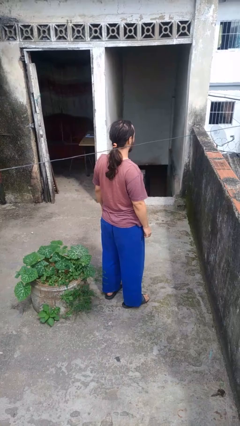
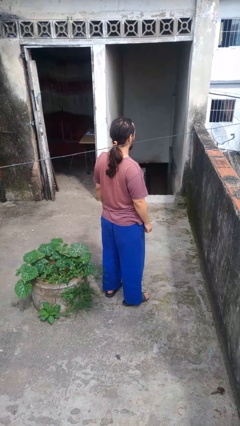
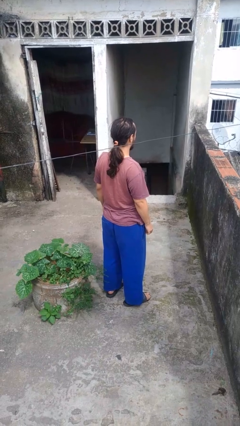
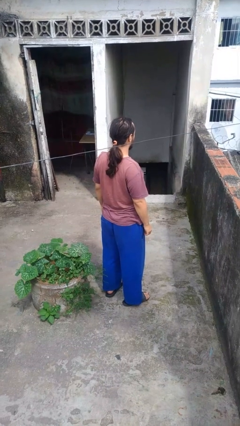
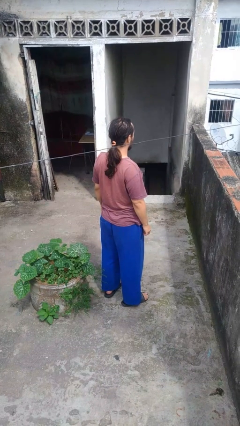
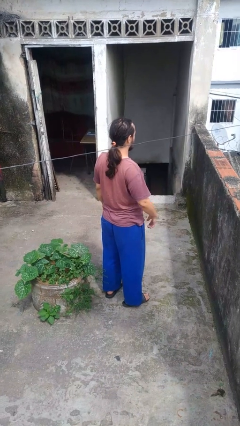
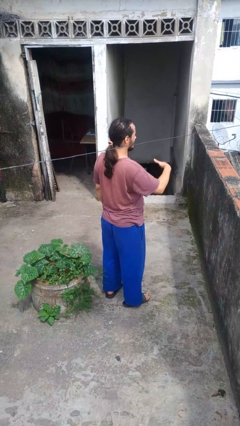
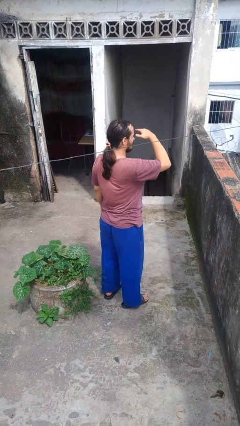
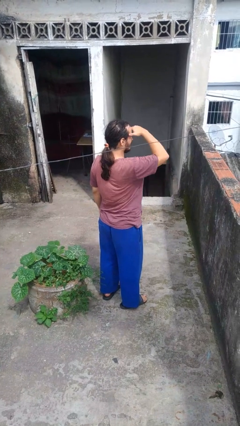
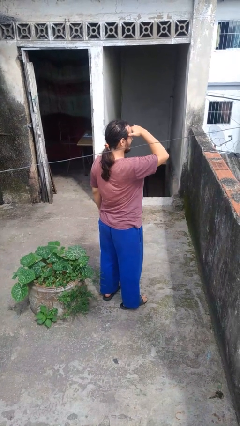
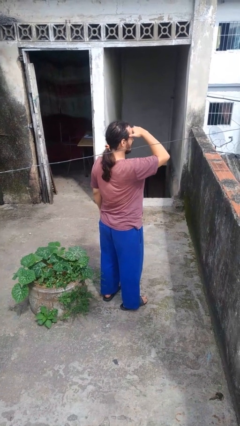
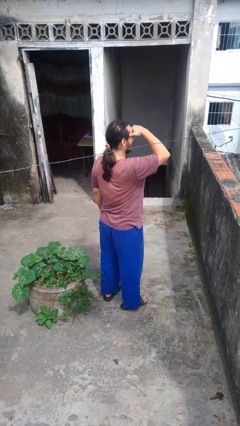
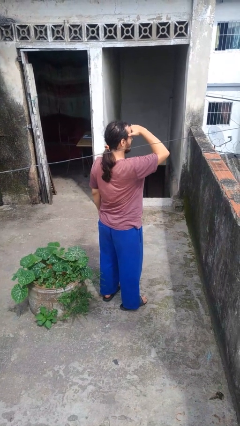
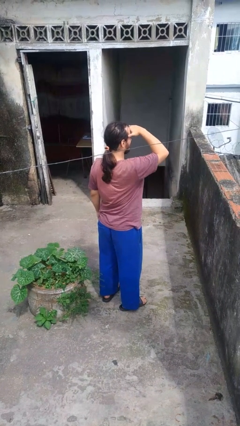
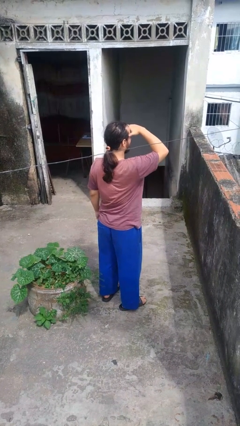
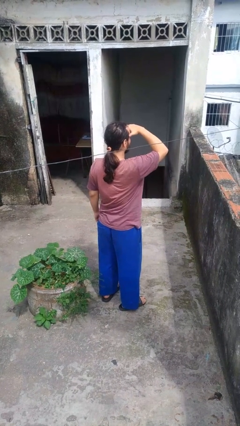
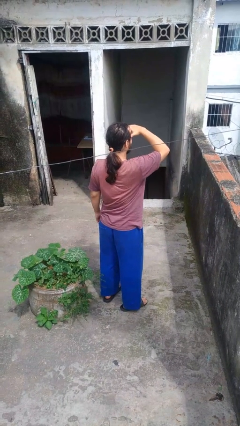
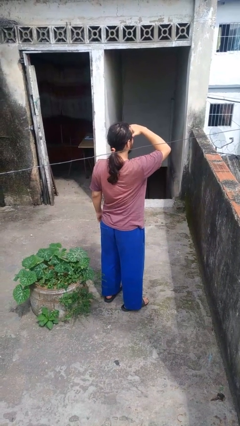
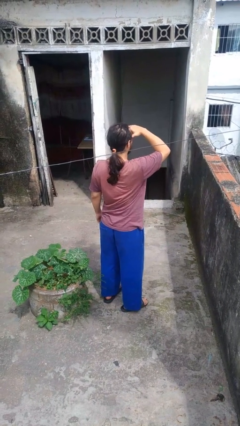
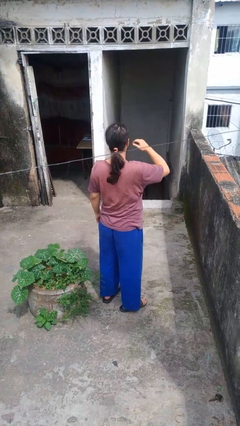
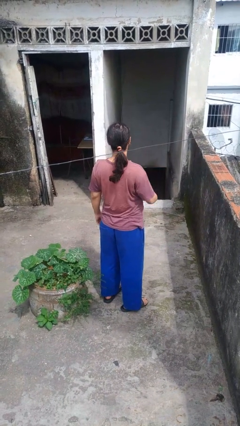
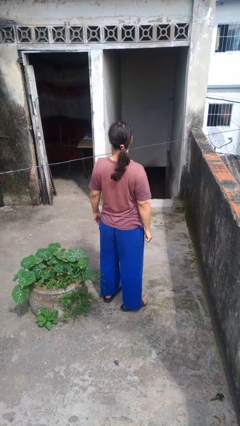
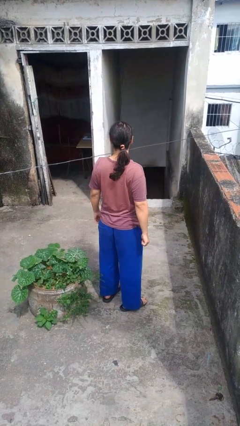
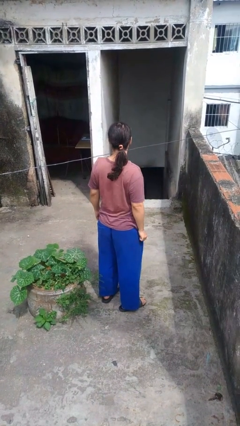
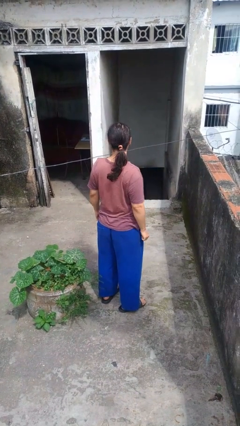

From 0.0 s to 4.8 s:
person shades eyes

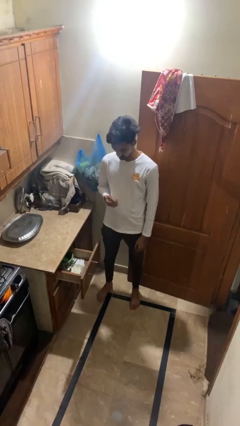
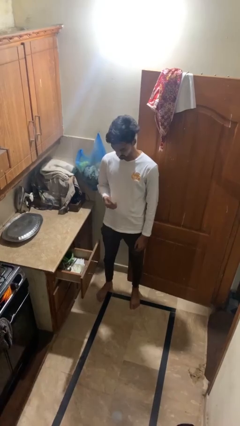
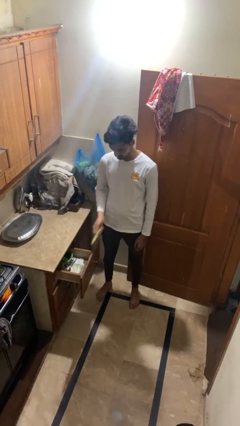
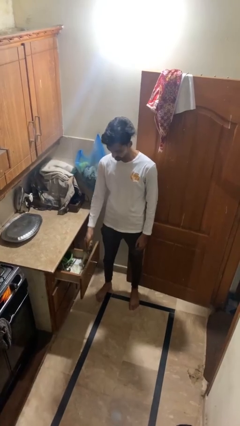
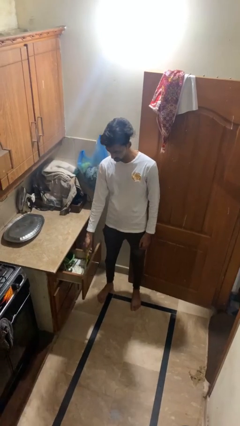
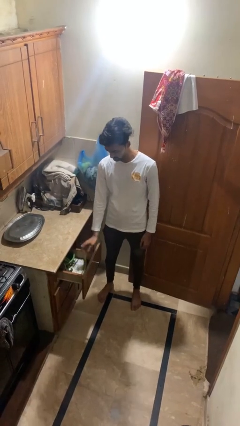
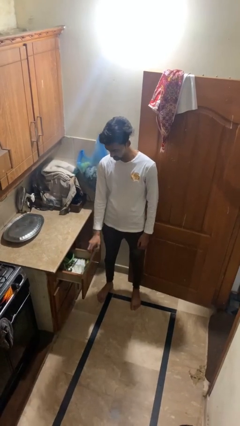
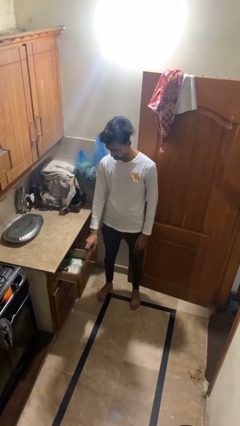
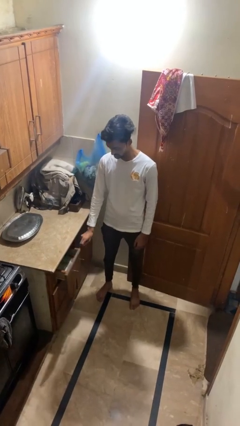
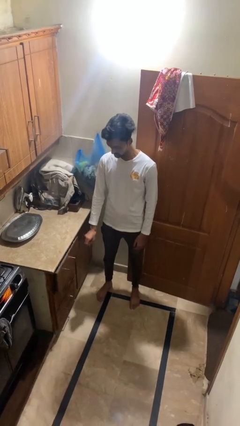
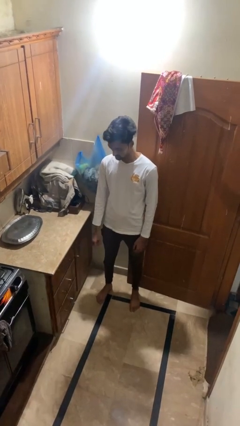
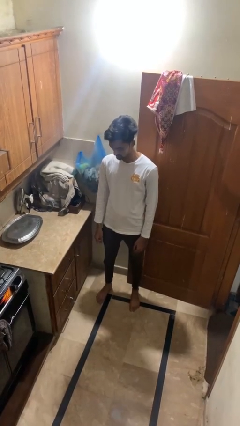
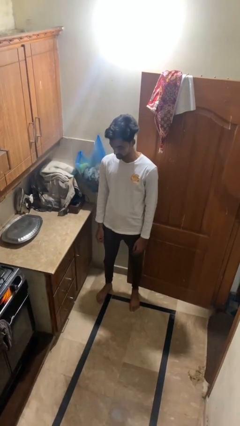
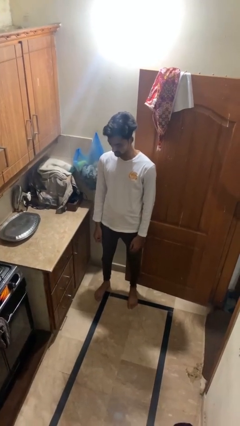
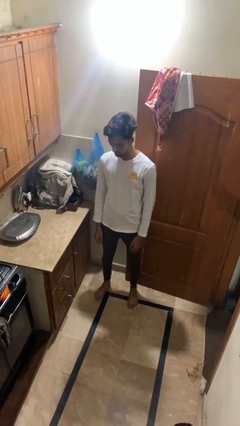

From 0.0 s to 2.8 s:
person puts object into kitchen drawer

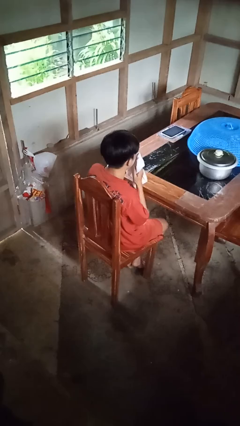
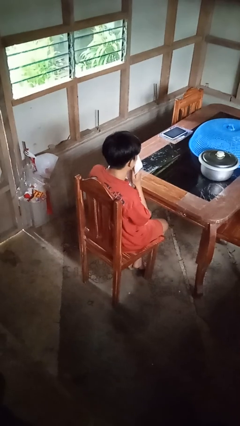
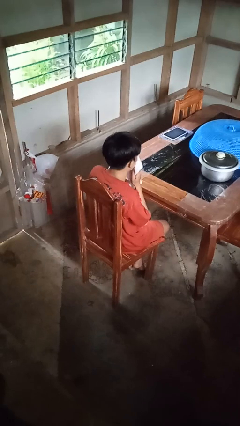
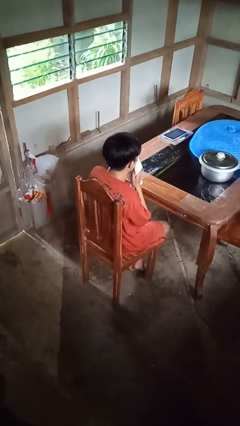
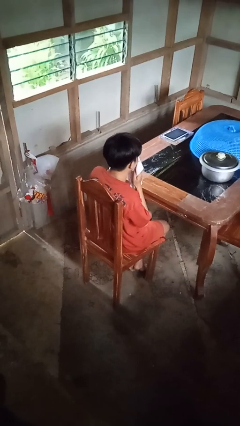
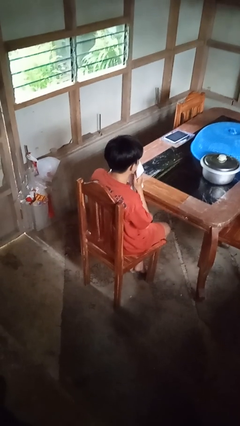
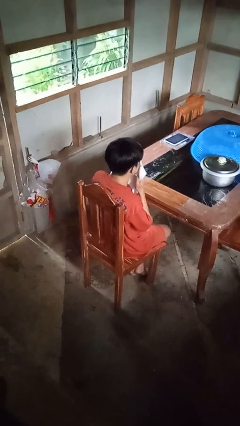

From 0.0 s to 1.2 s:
person wipes mouth with napkin

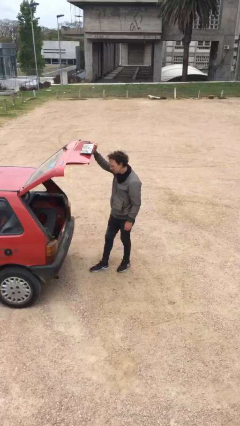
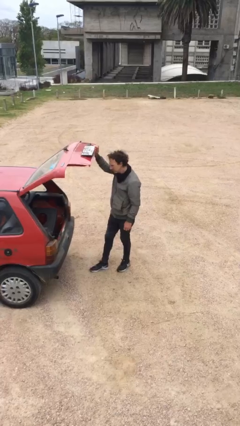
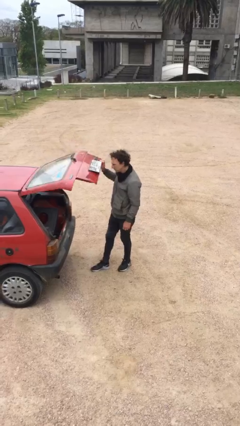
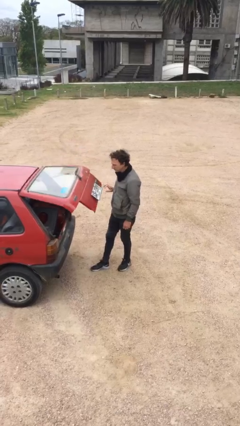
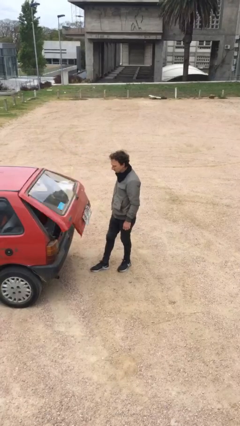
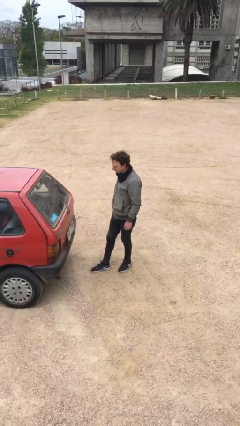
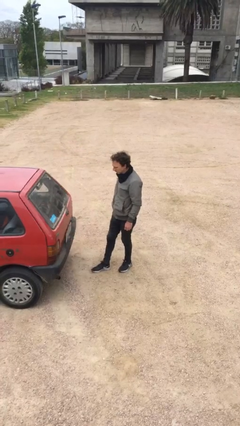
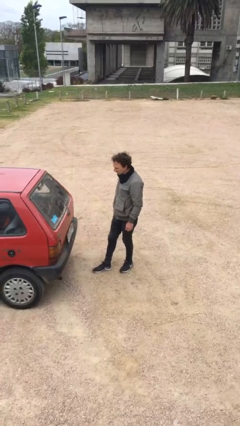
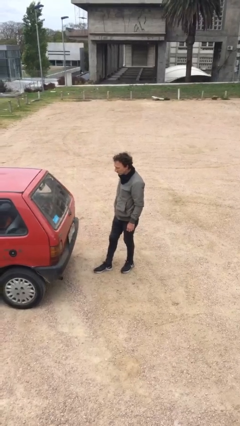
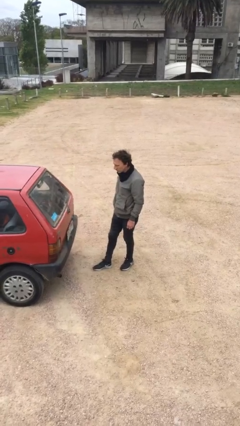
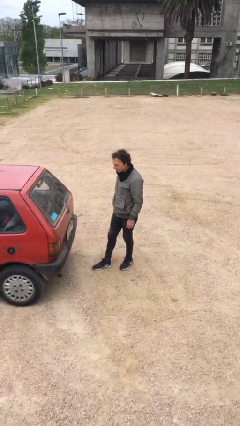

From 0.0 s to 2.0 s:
person closes car trunk

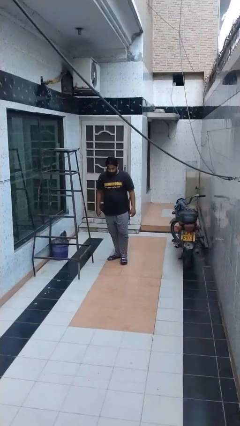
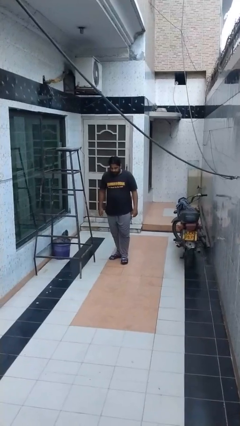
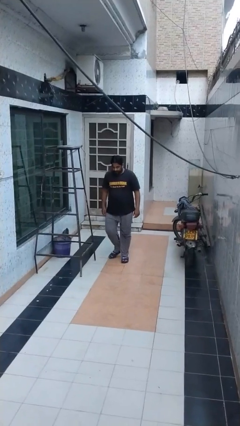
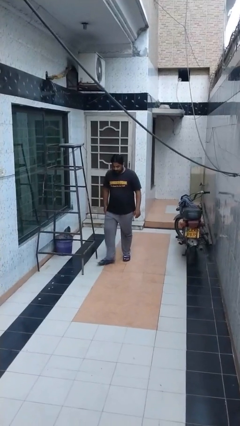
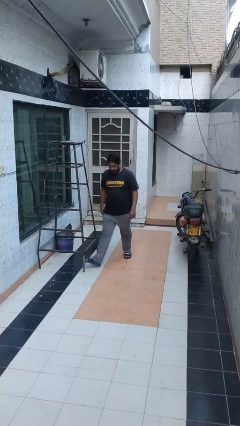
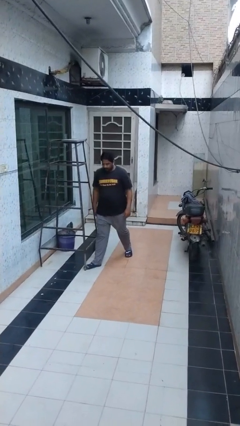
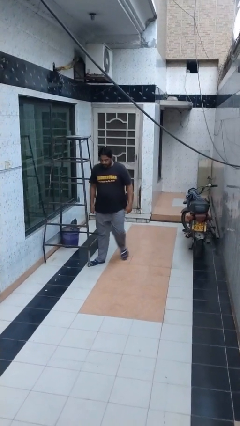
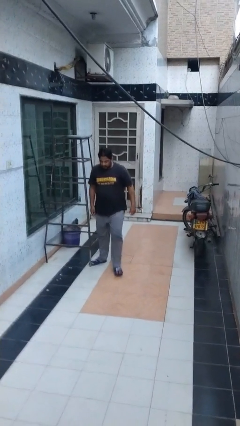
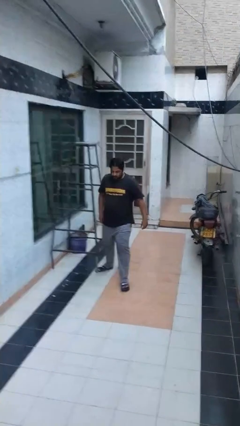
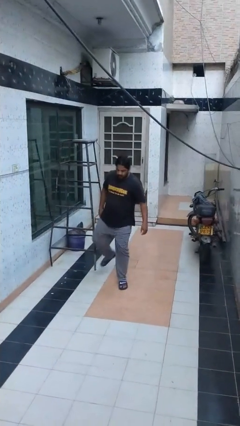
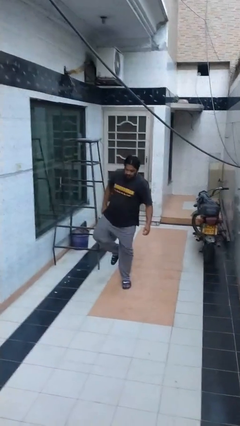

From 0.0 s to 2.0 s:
person trips on object on floor

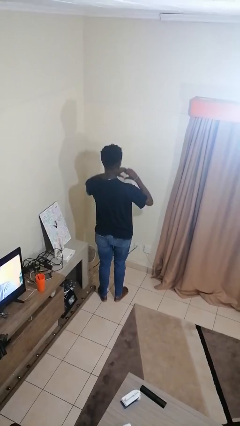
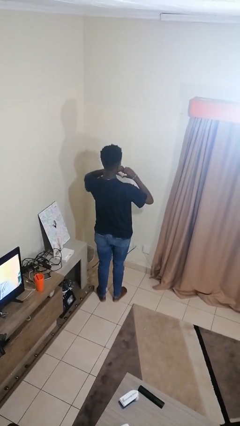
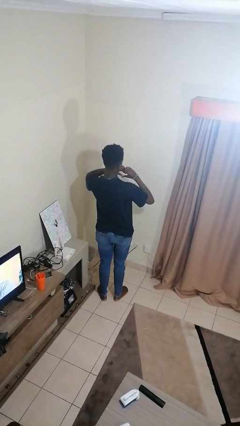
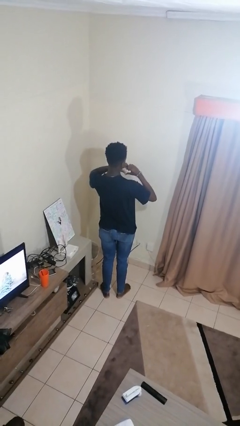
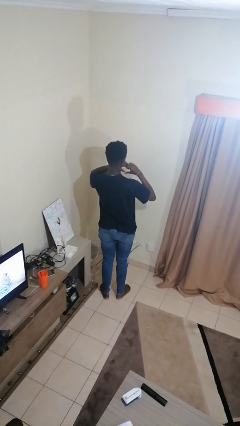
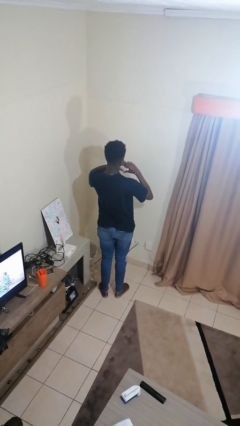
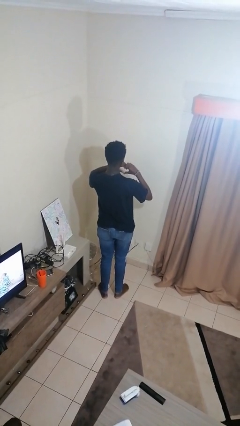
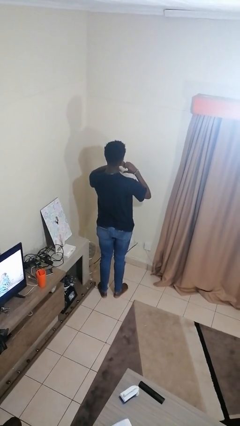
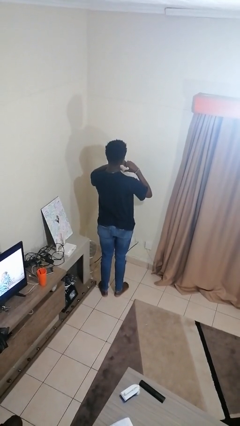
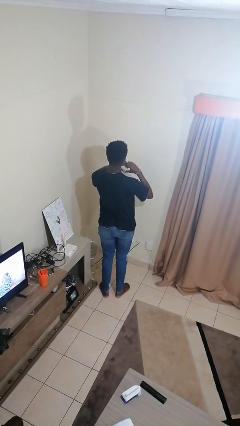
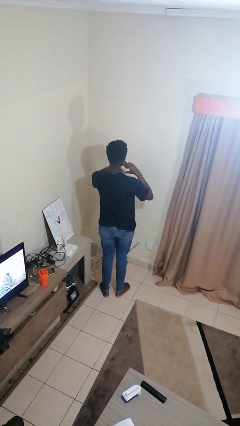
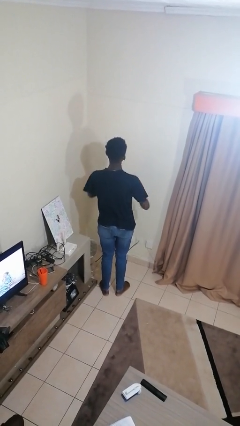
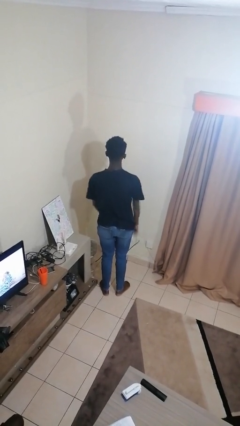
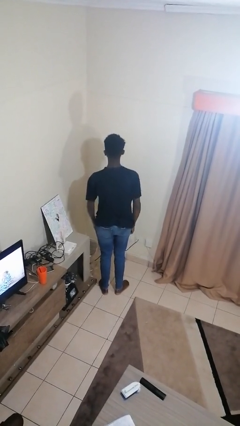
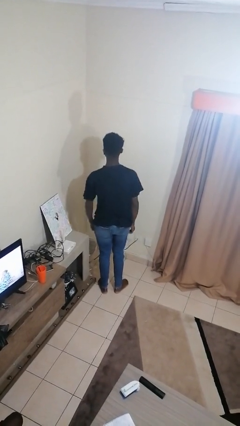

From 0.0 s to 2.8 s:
person gestures heart

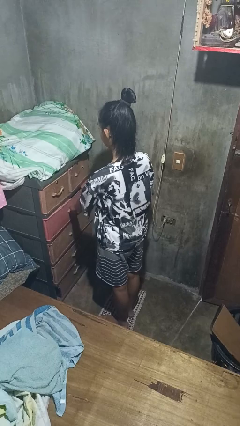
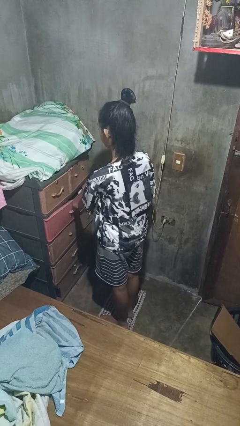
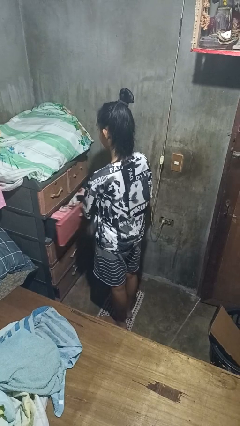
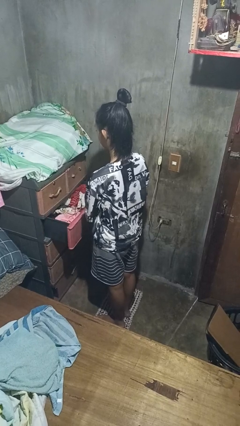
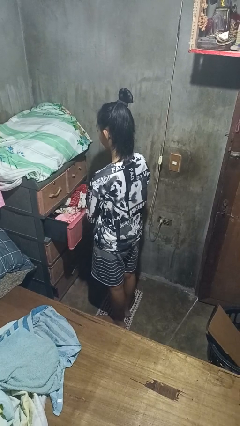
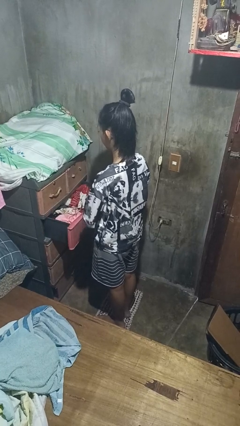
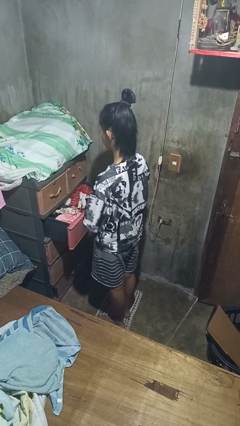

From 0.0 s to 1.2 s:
person opens dresser drawer

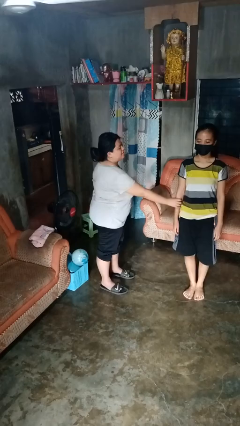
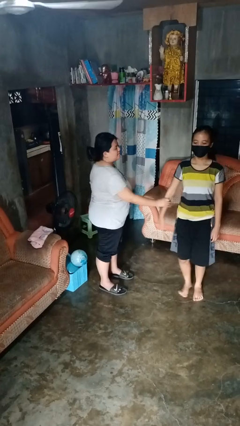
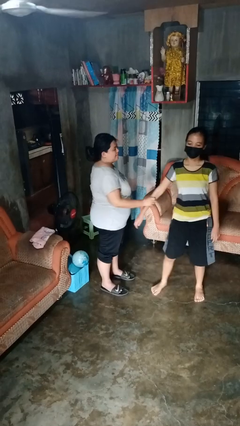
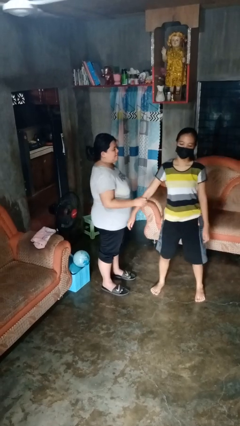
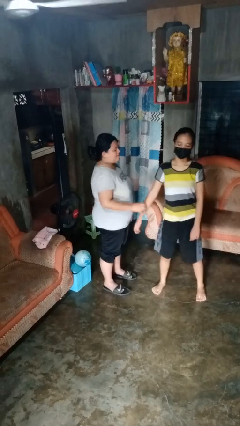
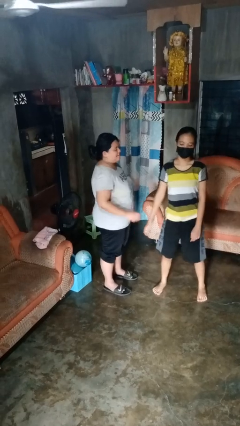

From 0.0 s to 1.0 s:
person grabs person by forearm
